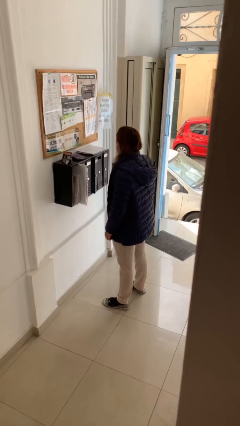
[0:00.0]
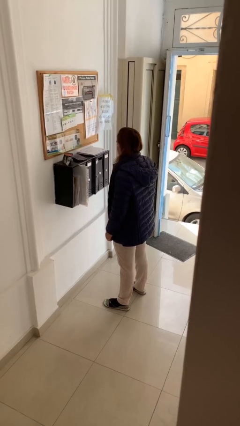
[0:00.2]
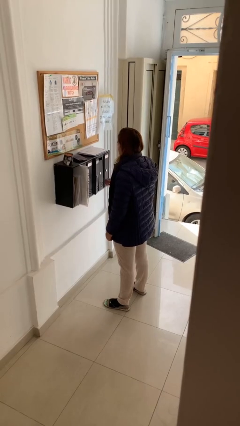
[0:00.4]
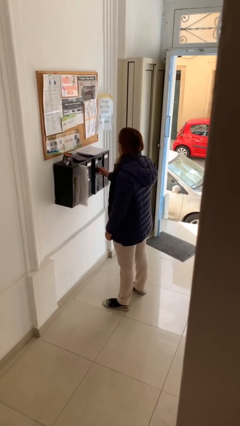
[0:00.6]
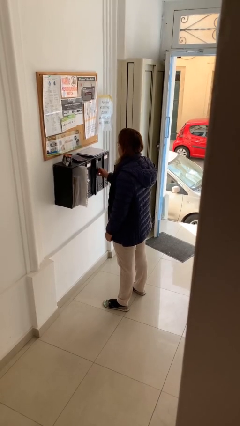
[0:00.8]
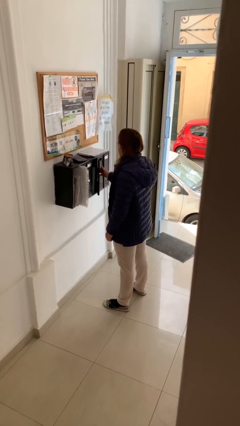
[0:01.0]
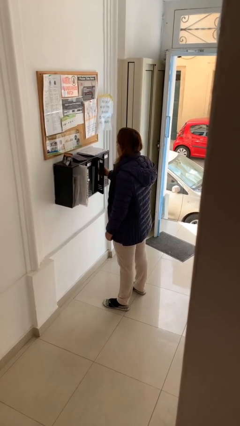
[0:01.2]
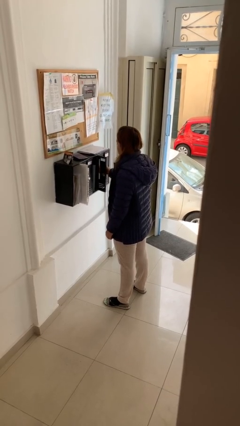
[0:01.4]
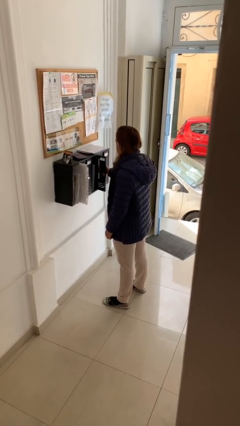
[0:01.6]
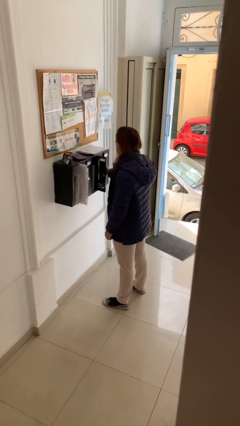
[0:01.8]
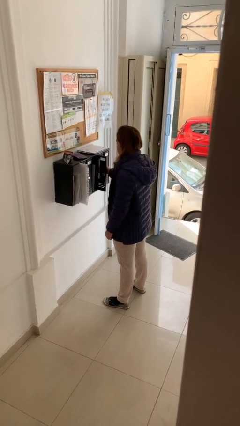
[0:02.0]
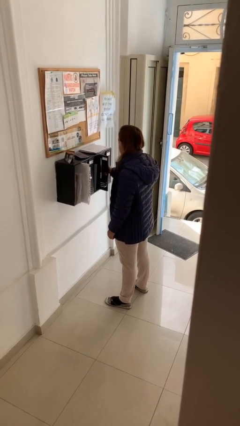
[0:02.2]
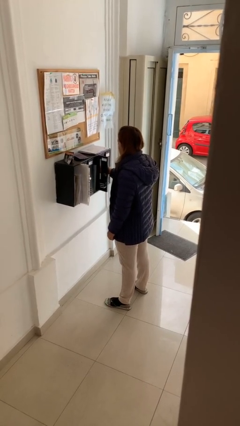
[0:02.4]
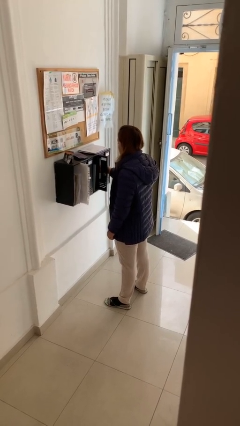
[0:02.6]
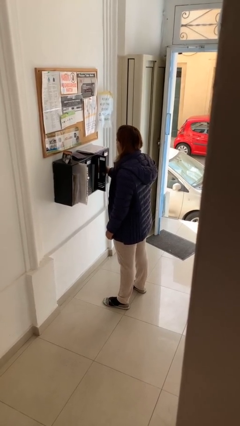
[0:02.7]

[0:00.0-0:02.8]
person opens mailbox

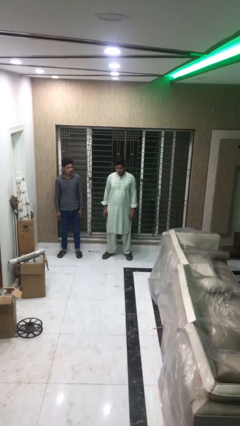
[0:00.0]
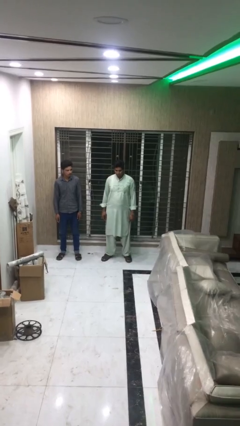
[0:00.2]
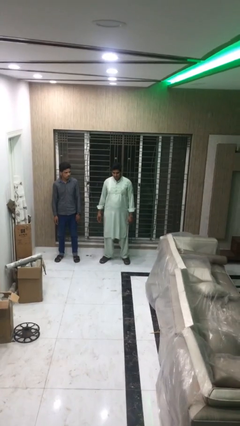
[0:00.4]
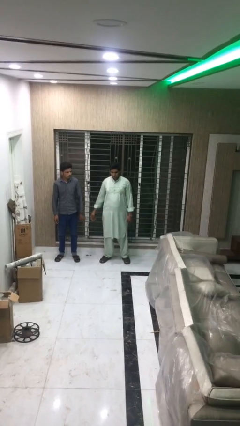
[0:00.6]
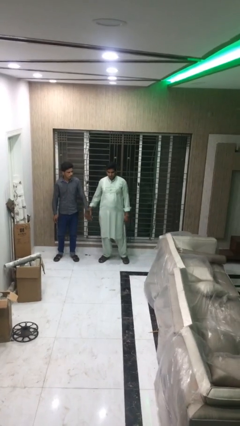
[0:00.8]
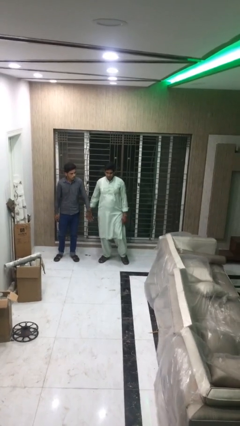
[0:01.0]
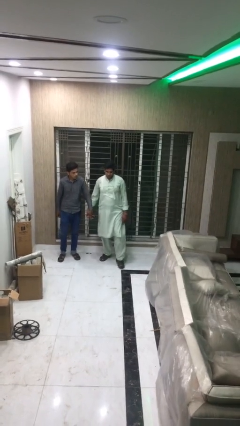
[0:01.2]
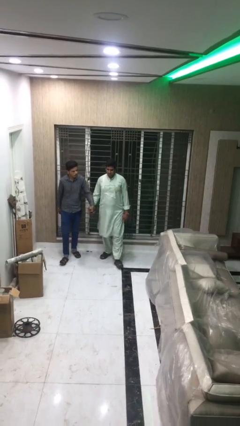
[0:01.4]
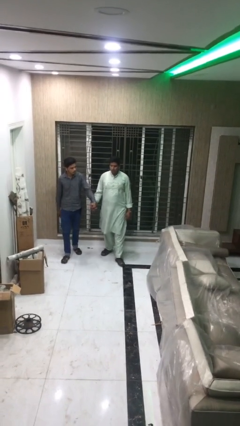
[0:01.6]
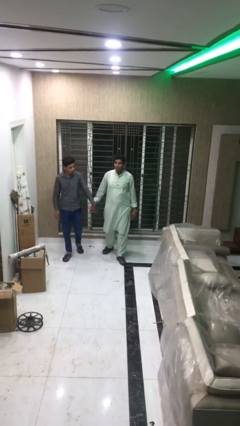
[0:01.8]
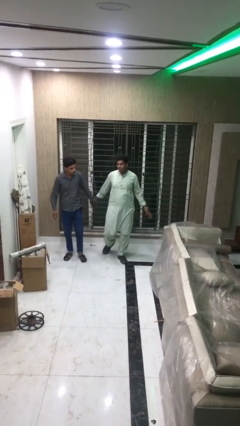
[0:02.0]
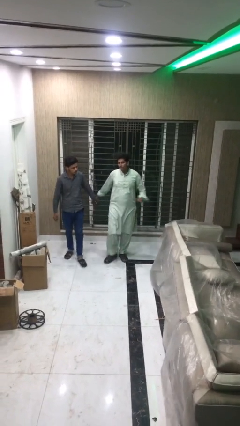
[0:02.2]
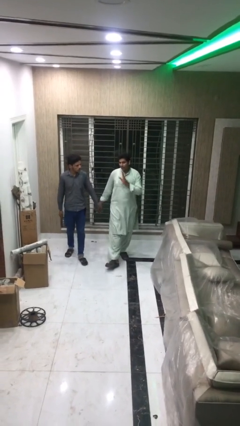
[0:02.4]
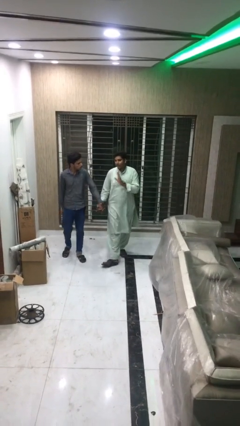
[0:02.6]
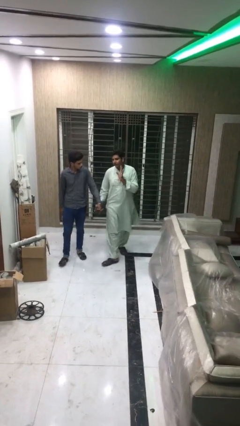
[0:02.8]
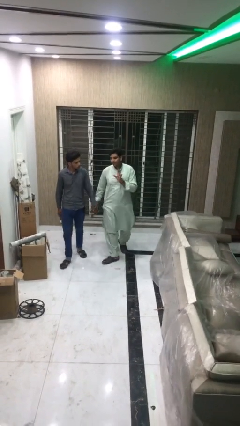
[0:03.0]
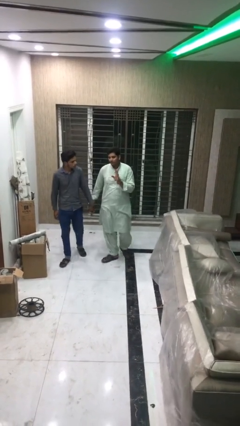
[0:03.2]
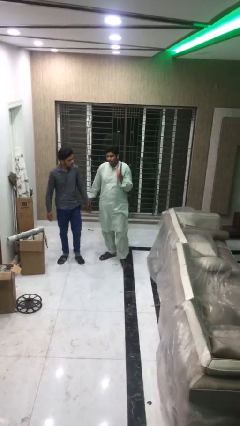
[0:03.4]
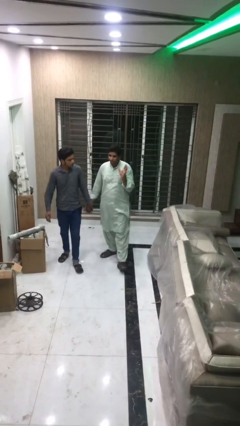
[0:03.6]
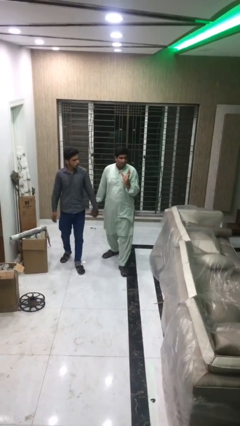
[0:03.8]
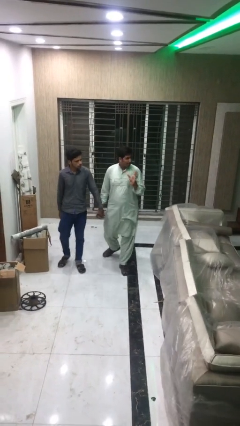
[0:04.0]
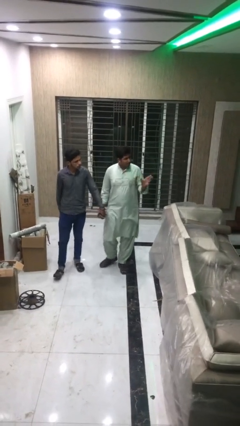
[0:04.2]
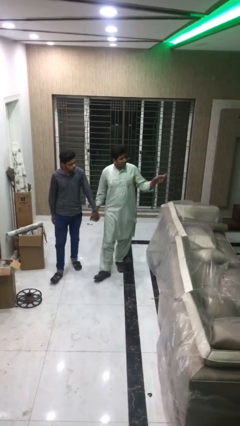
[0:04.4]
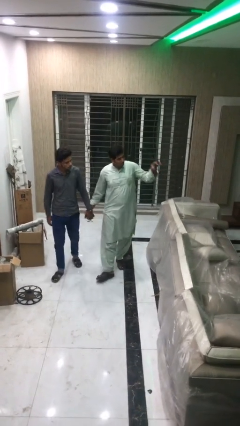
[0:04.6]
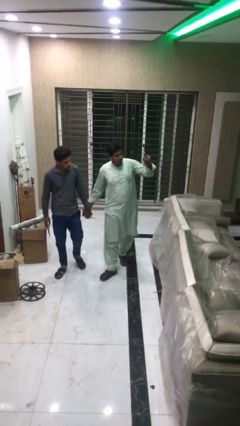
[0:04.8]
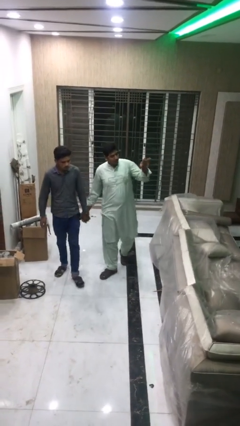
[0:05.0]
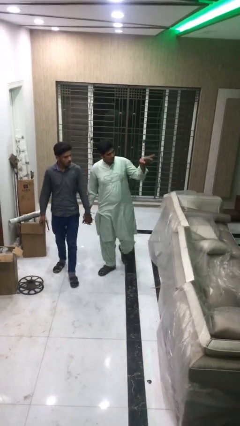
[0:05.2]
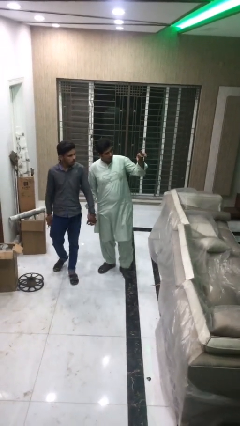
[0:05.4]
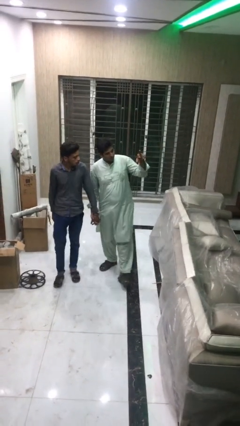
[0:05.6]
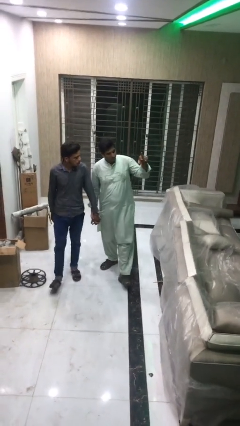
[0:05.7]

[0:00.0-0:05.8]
person holds hand

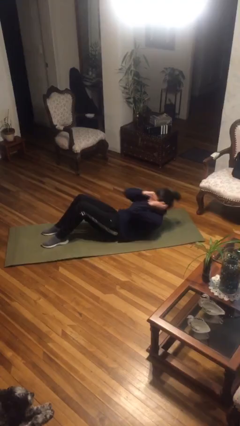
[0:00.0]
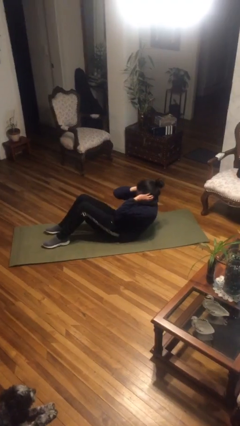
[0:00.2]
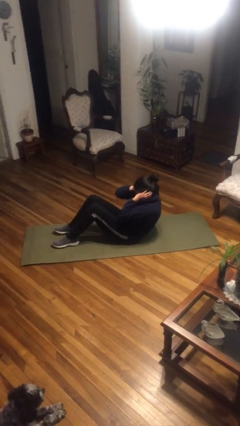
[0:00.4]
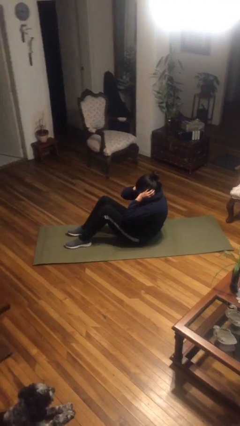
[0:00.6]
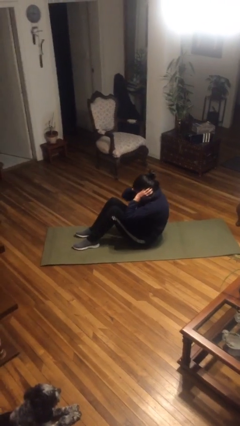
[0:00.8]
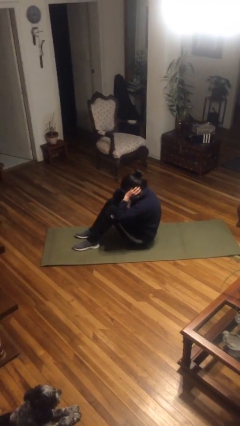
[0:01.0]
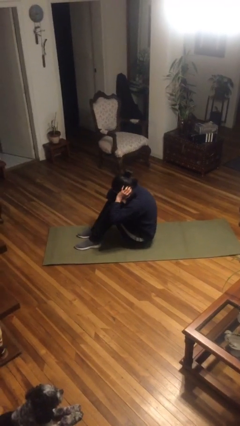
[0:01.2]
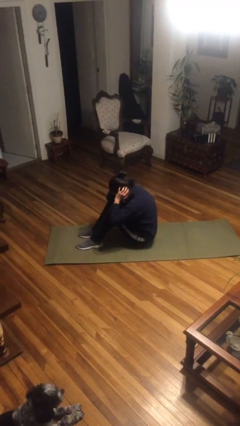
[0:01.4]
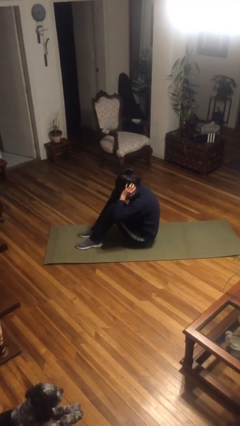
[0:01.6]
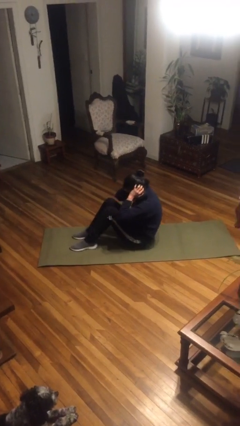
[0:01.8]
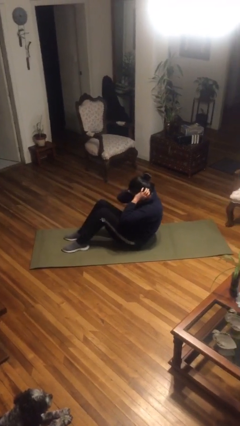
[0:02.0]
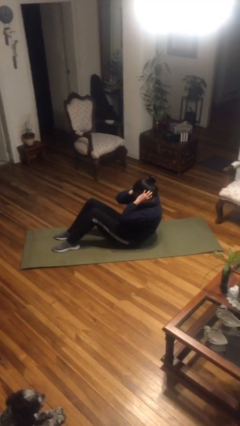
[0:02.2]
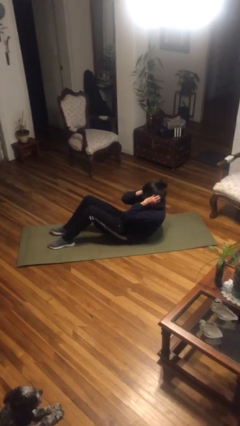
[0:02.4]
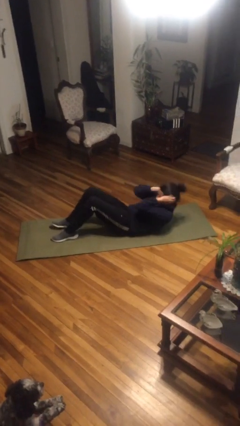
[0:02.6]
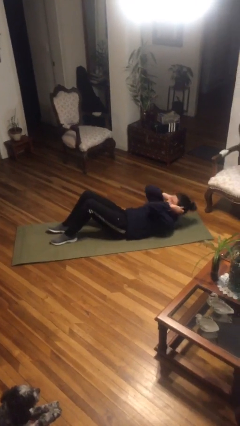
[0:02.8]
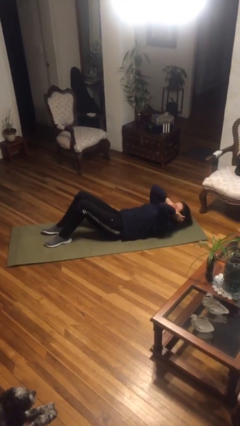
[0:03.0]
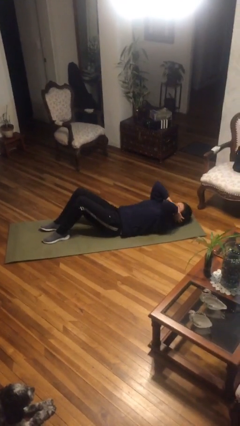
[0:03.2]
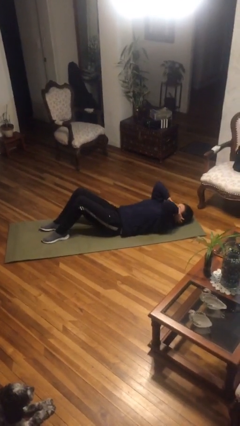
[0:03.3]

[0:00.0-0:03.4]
person exercises with situp

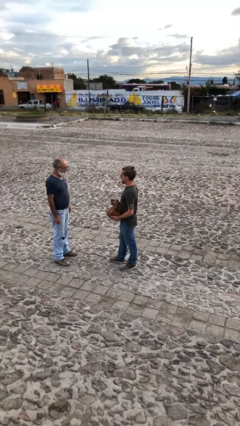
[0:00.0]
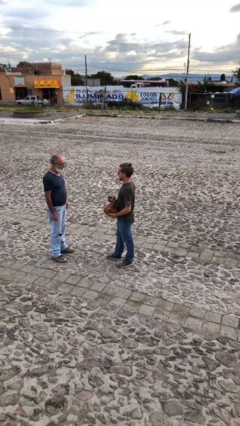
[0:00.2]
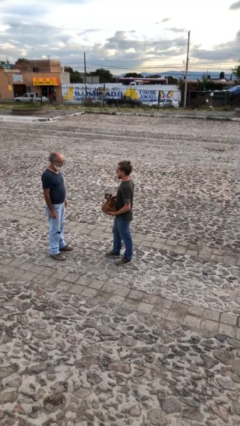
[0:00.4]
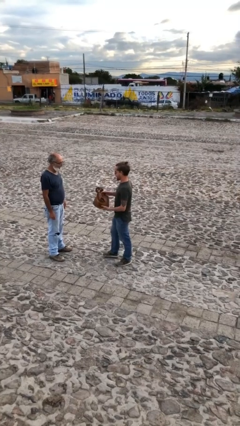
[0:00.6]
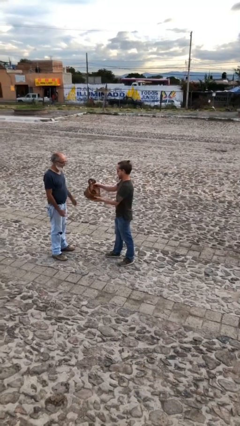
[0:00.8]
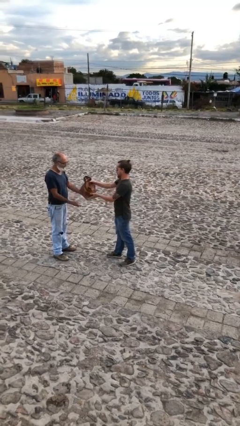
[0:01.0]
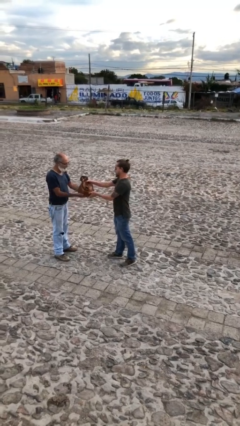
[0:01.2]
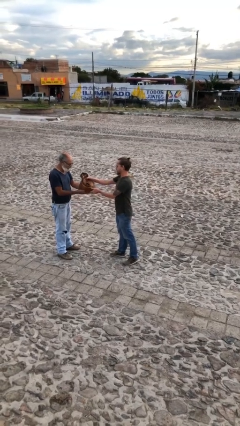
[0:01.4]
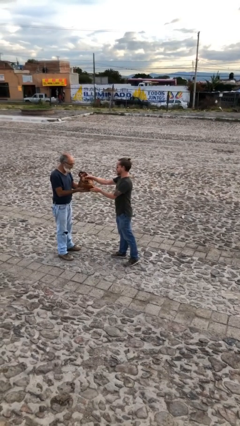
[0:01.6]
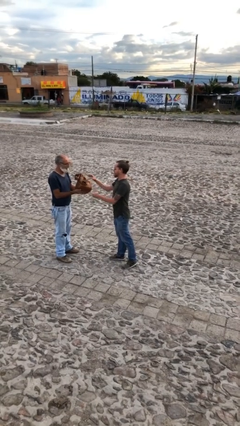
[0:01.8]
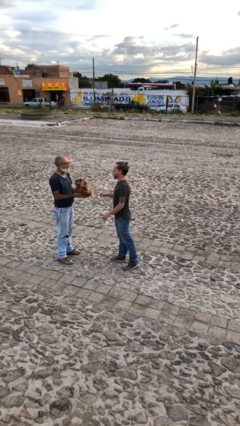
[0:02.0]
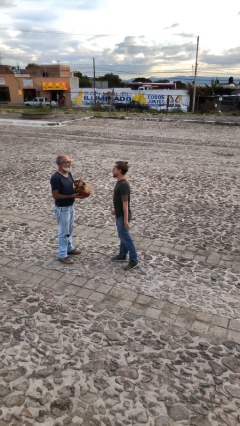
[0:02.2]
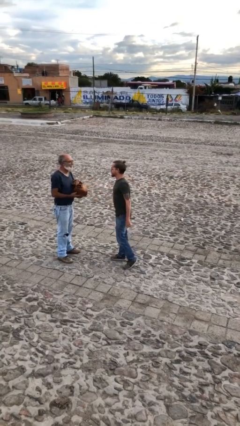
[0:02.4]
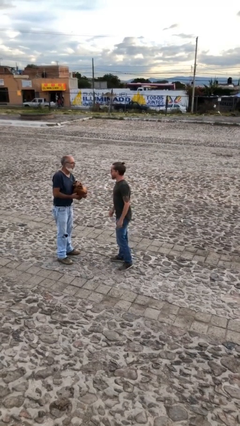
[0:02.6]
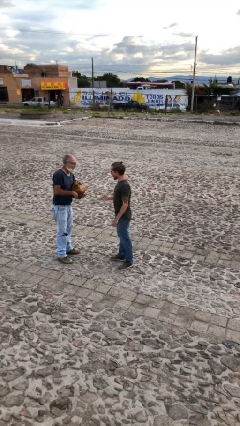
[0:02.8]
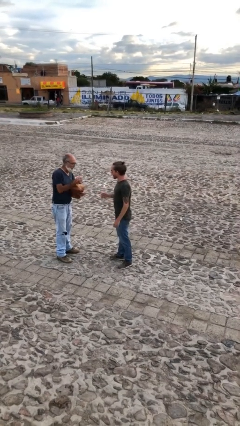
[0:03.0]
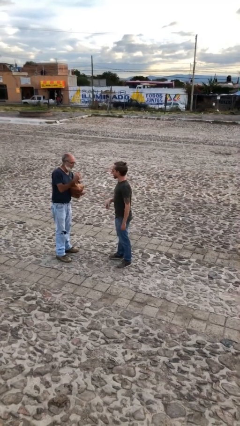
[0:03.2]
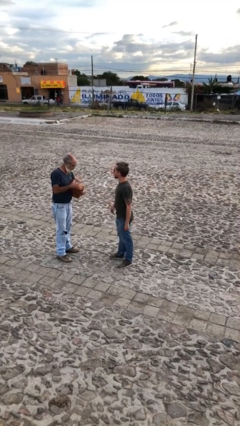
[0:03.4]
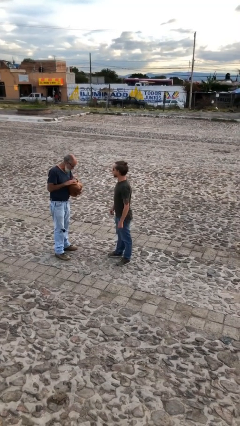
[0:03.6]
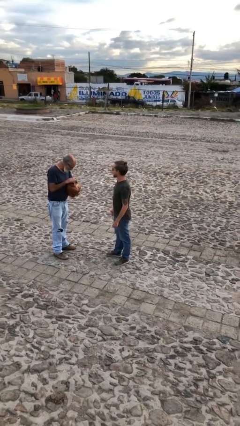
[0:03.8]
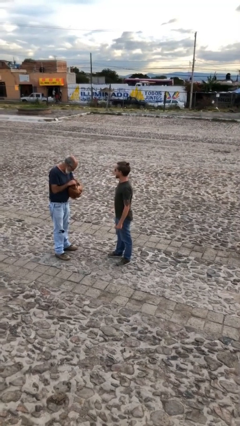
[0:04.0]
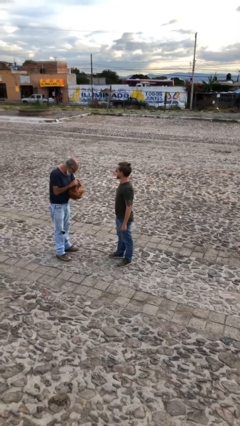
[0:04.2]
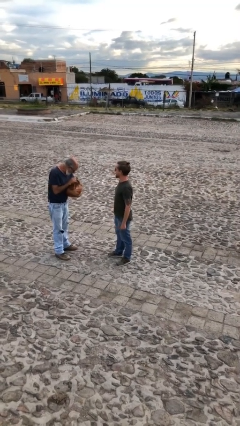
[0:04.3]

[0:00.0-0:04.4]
person transfers object to person

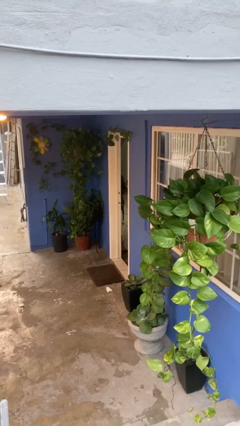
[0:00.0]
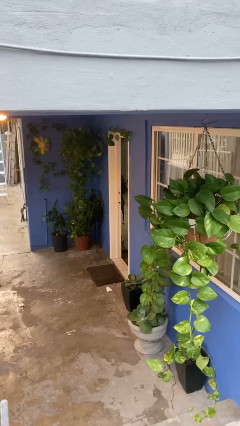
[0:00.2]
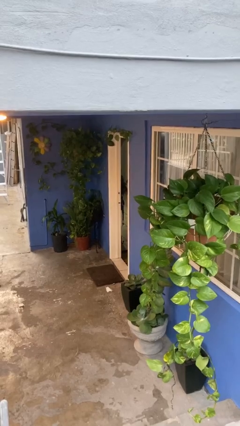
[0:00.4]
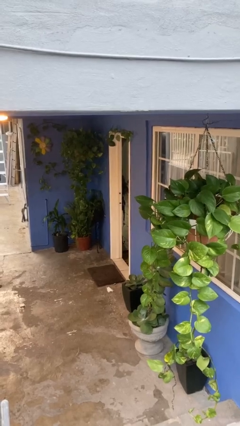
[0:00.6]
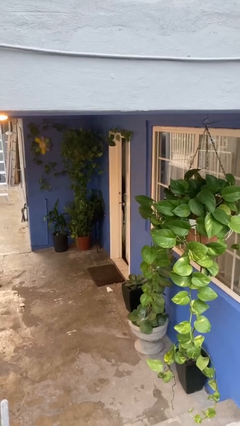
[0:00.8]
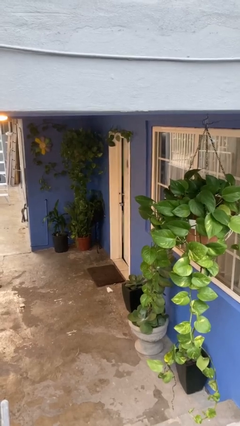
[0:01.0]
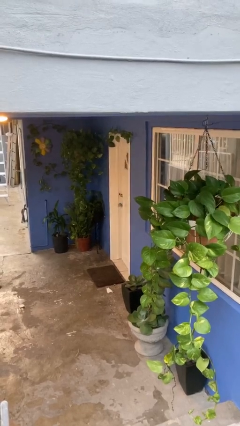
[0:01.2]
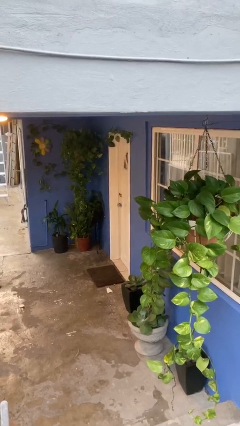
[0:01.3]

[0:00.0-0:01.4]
person closes facility door
